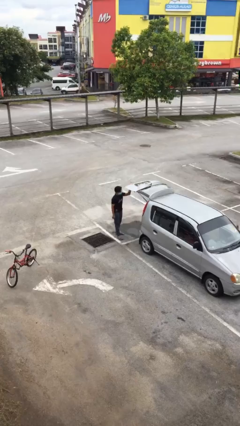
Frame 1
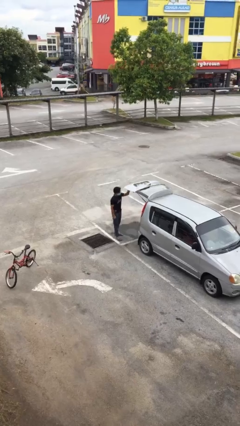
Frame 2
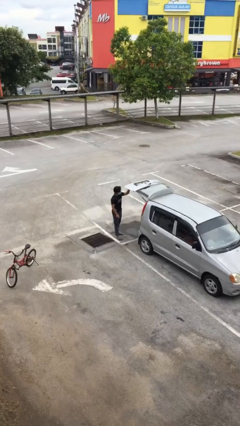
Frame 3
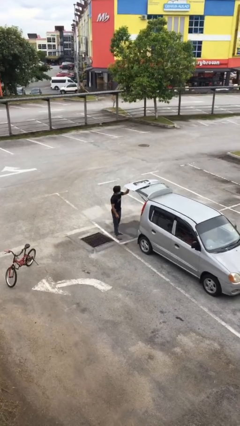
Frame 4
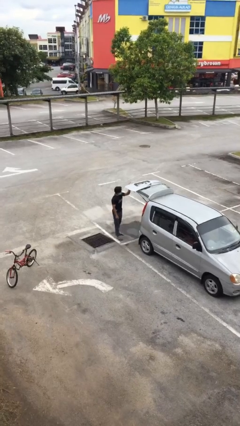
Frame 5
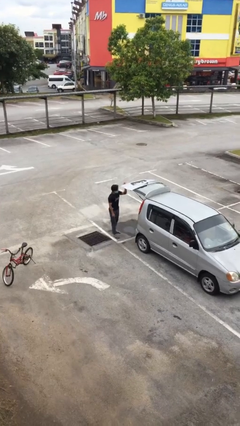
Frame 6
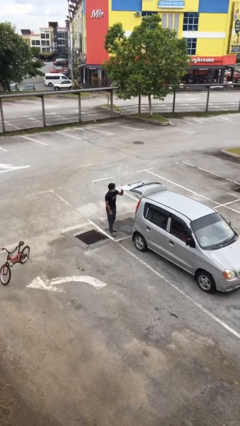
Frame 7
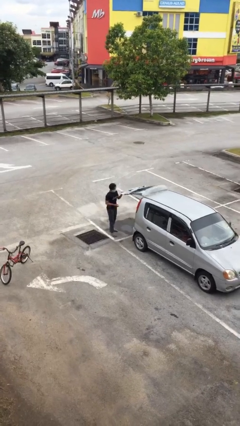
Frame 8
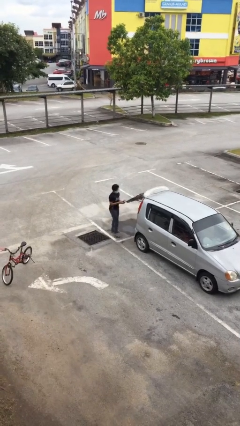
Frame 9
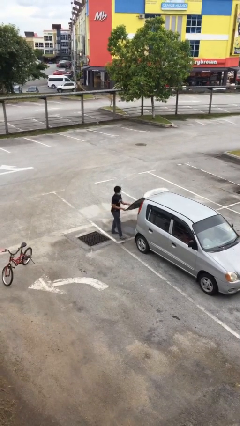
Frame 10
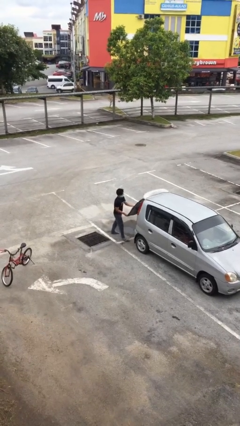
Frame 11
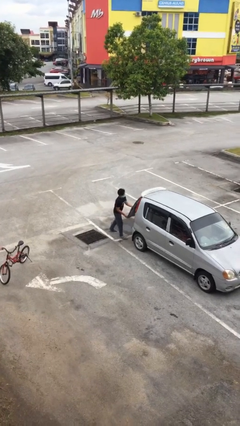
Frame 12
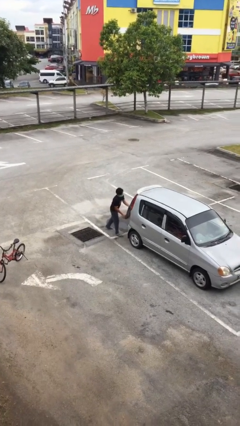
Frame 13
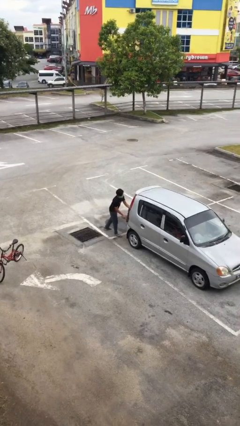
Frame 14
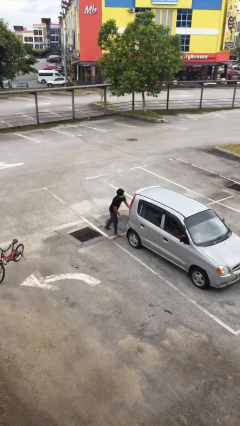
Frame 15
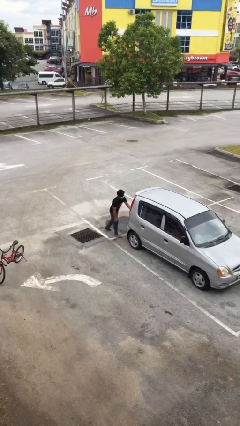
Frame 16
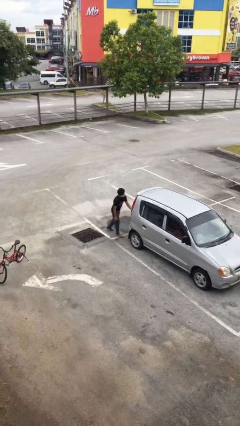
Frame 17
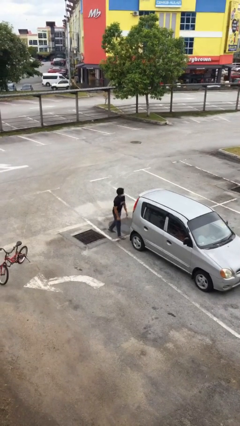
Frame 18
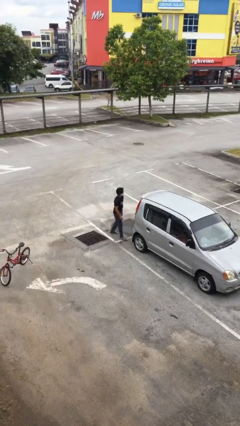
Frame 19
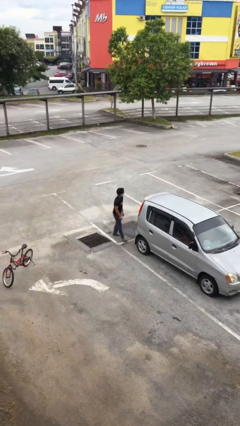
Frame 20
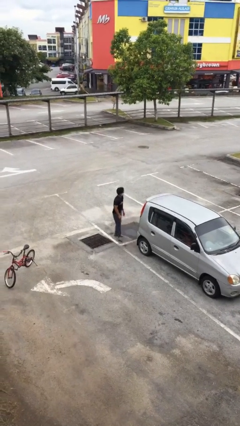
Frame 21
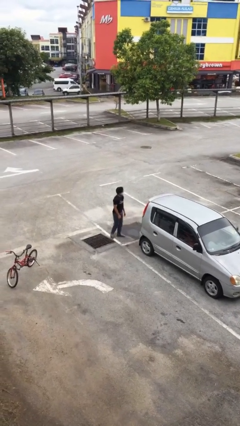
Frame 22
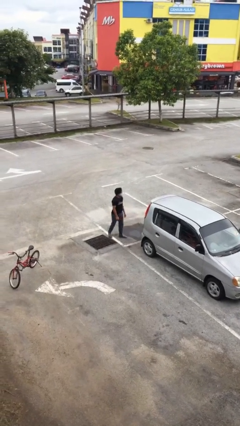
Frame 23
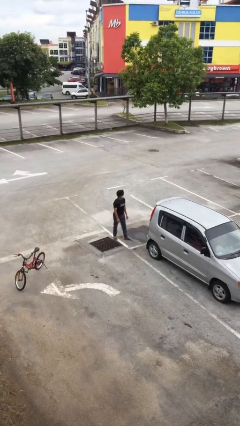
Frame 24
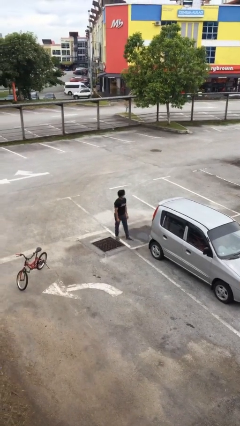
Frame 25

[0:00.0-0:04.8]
person closes car trunk

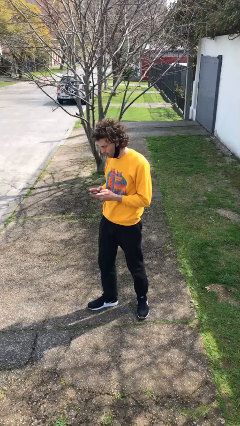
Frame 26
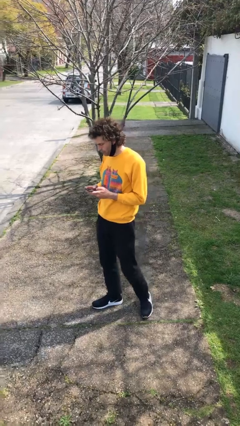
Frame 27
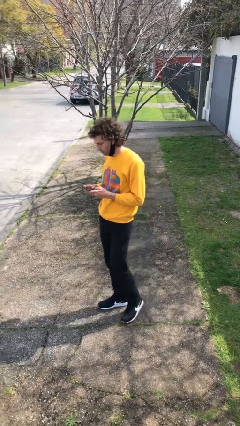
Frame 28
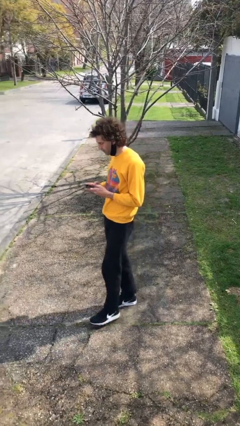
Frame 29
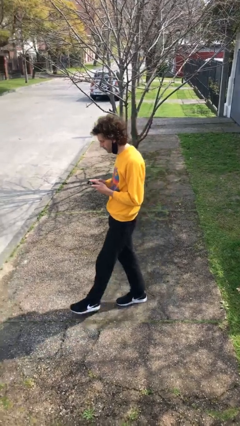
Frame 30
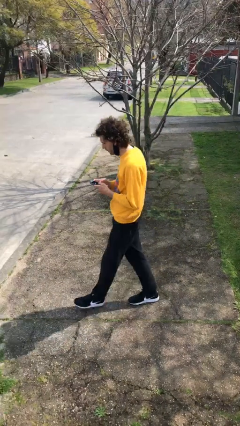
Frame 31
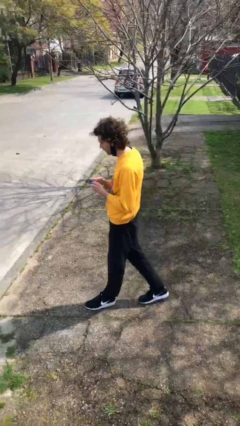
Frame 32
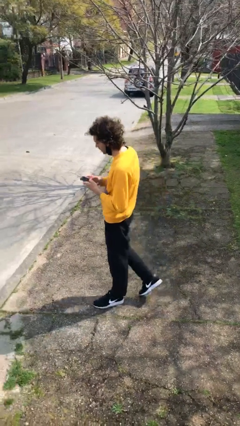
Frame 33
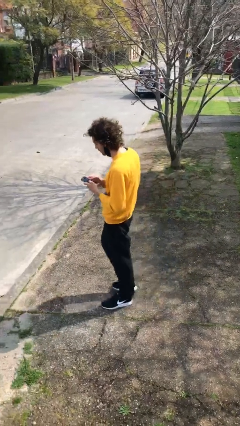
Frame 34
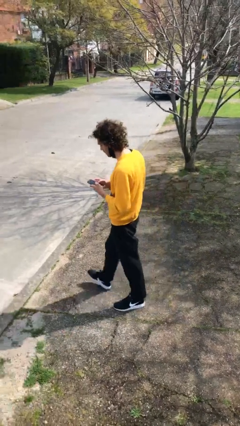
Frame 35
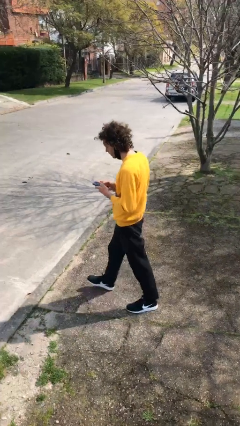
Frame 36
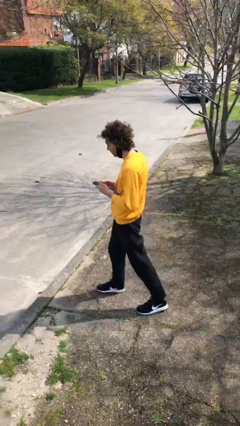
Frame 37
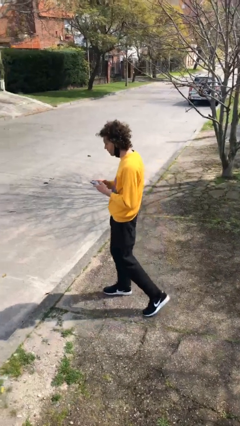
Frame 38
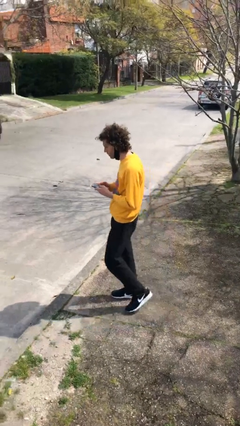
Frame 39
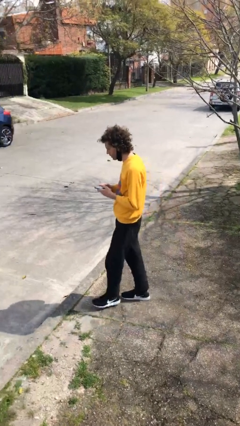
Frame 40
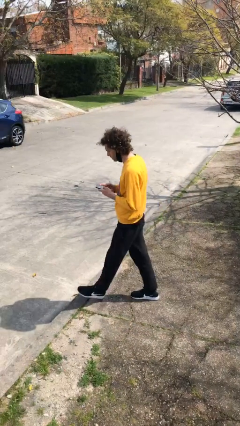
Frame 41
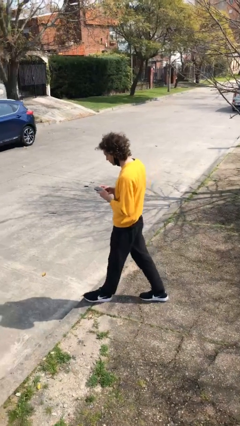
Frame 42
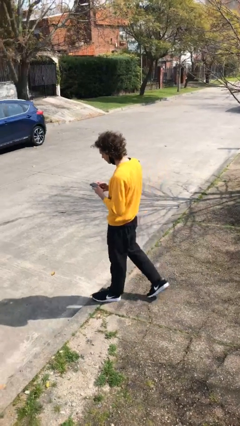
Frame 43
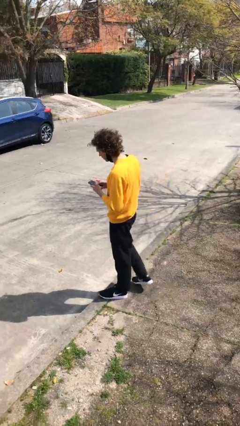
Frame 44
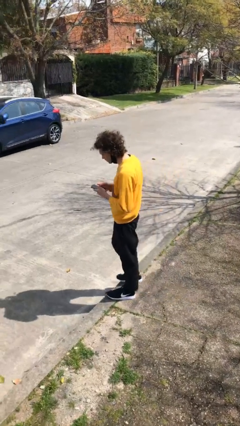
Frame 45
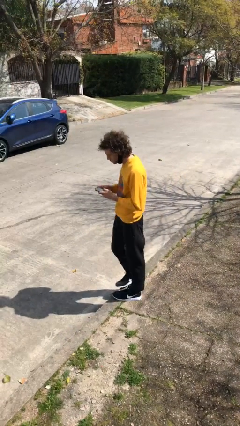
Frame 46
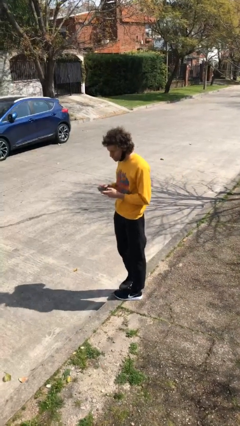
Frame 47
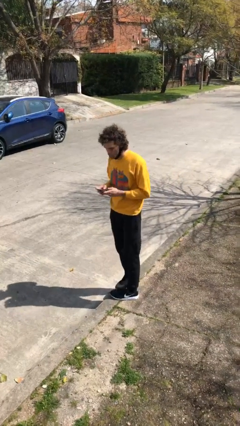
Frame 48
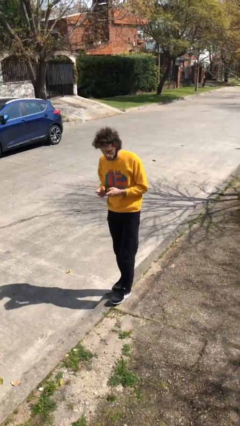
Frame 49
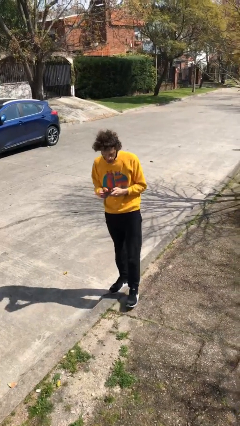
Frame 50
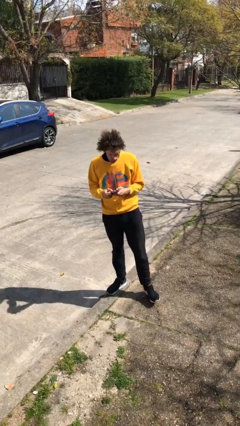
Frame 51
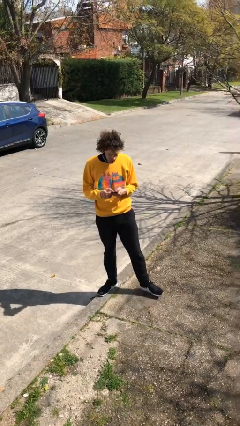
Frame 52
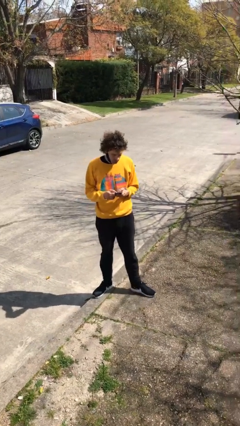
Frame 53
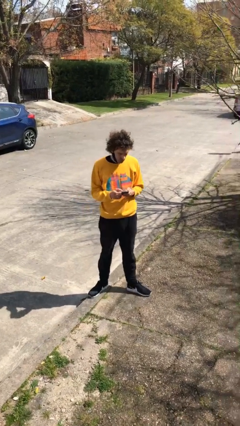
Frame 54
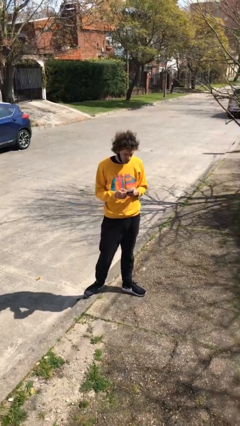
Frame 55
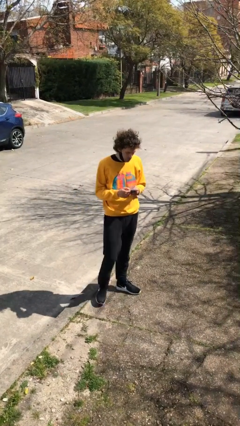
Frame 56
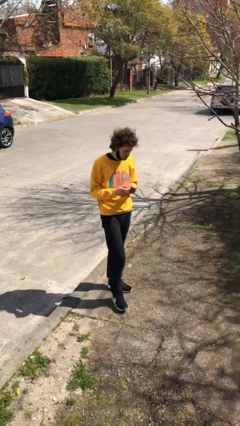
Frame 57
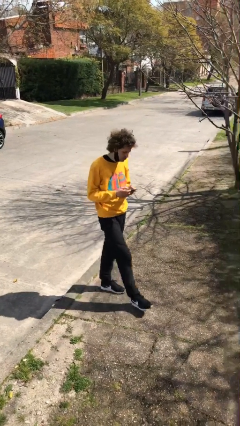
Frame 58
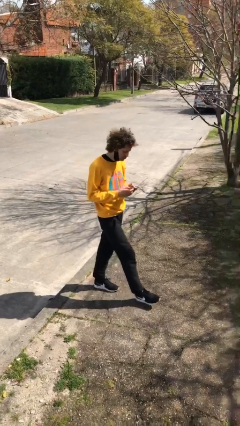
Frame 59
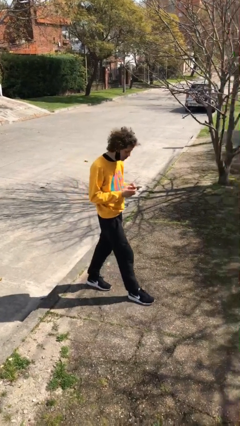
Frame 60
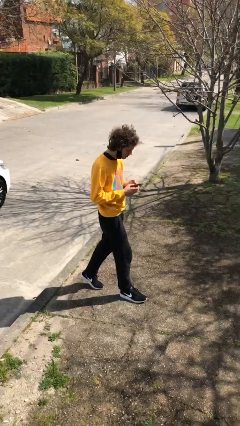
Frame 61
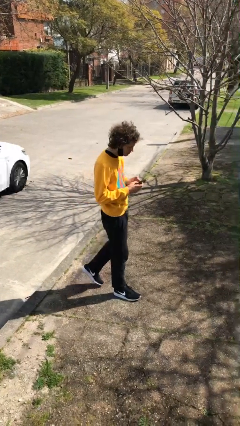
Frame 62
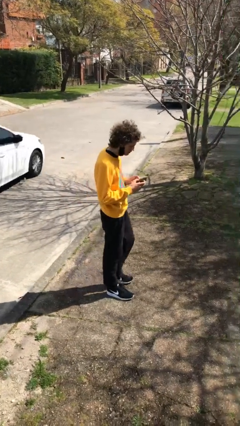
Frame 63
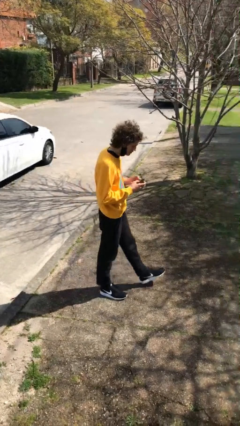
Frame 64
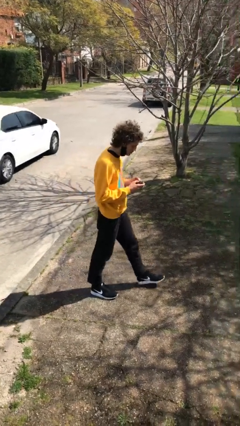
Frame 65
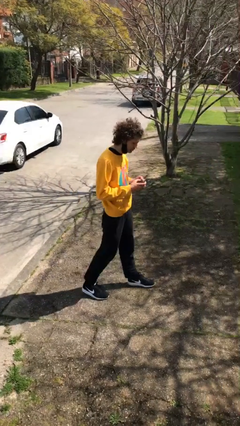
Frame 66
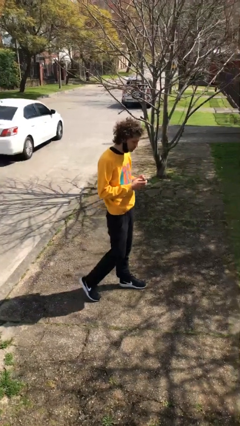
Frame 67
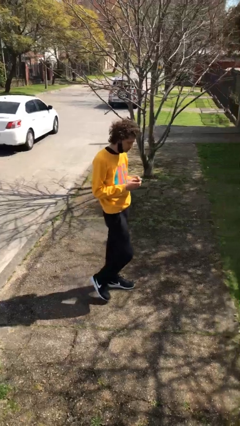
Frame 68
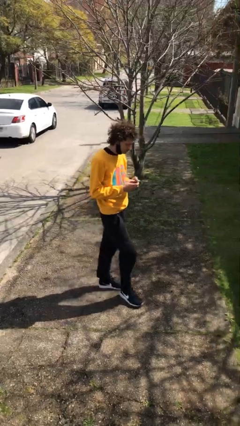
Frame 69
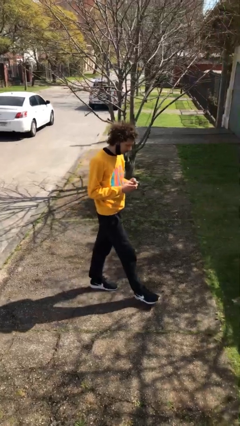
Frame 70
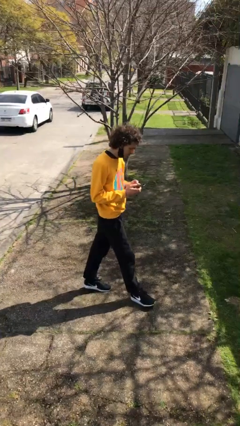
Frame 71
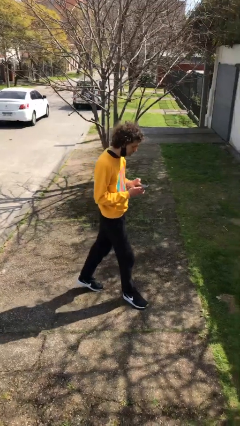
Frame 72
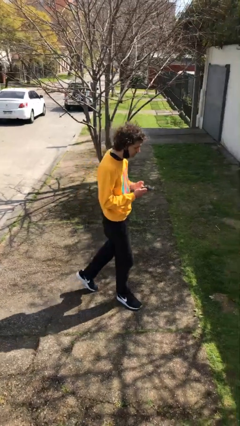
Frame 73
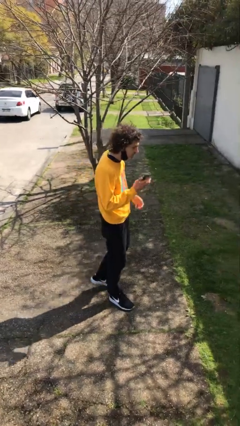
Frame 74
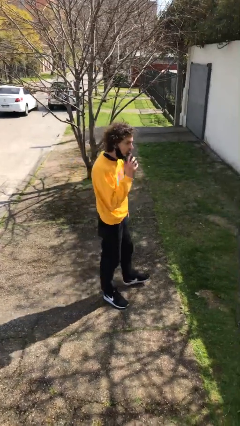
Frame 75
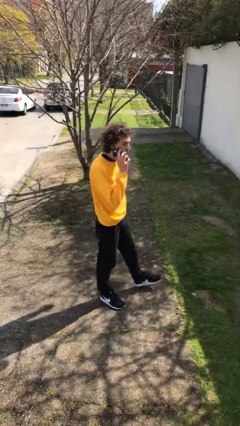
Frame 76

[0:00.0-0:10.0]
person texts on phone

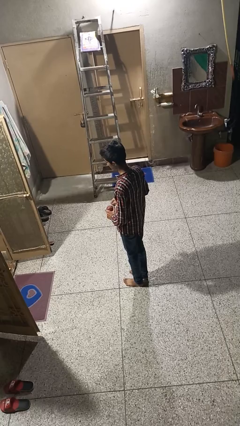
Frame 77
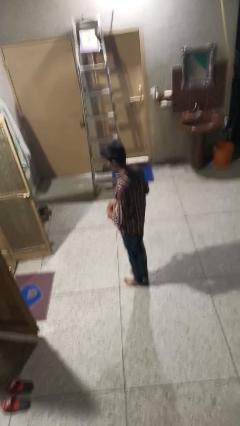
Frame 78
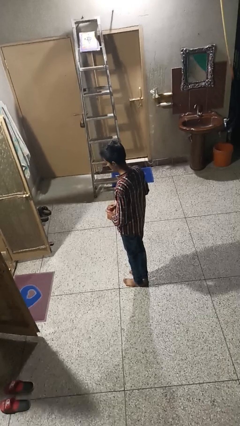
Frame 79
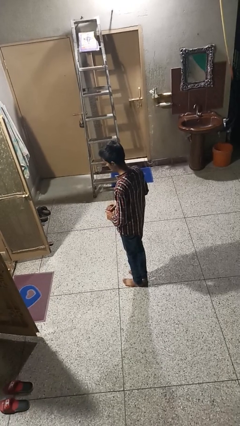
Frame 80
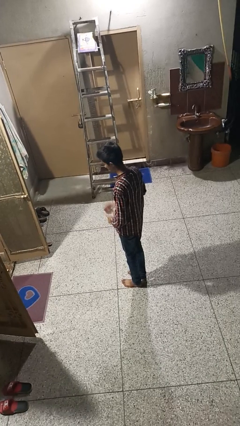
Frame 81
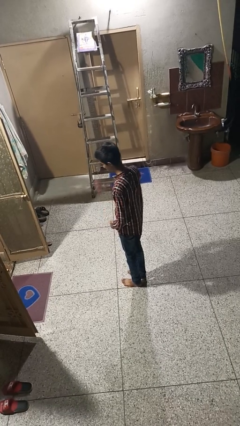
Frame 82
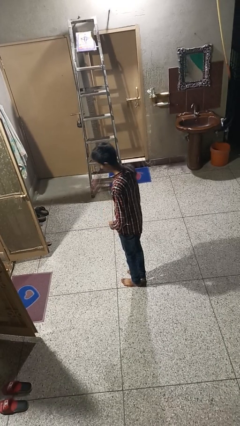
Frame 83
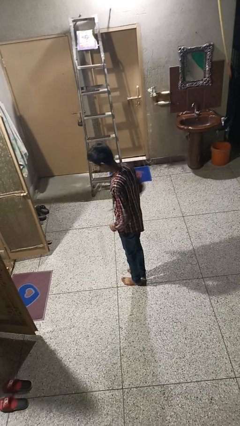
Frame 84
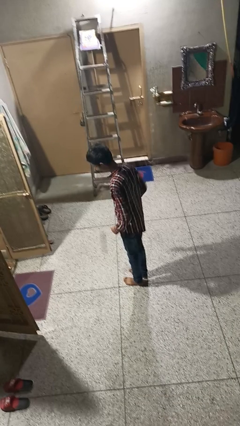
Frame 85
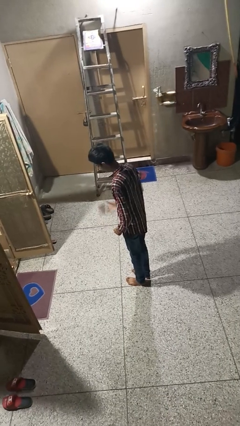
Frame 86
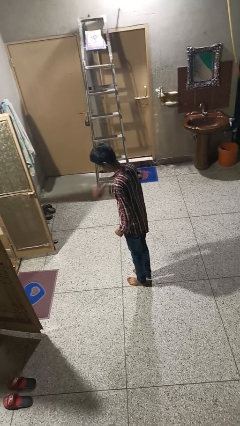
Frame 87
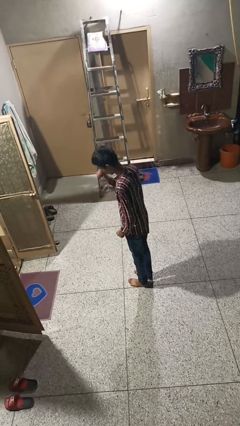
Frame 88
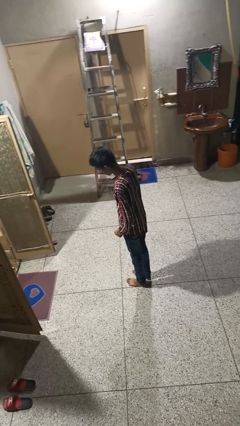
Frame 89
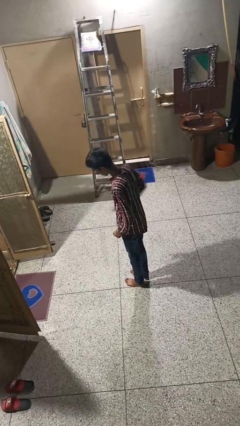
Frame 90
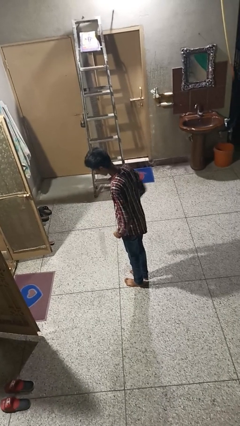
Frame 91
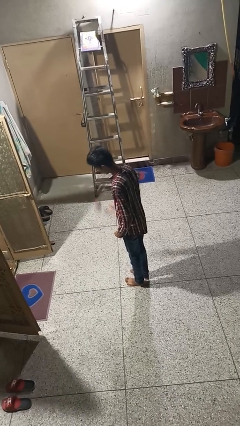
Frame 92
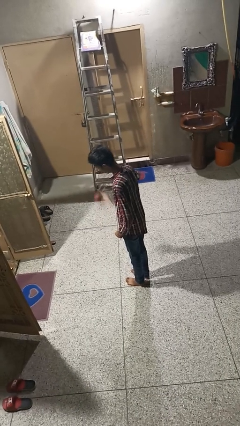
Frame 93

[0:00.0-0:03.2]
person bounces ball on floor
